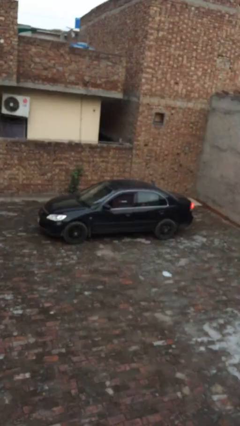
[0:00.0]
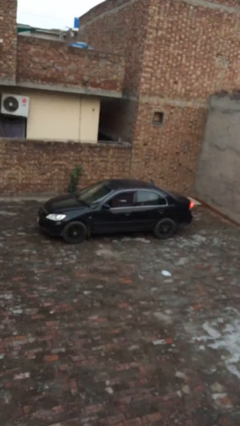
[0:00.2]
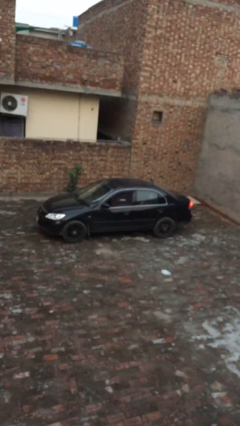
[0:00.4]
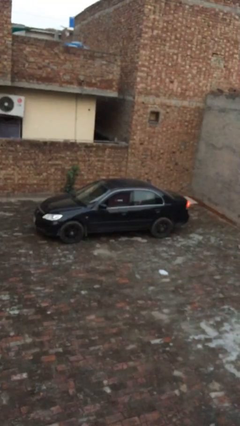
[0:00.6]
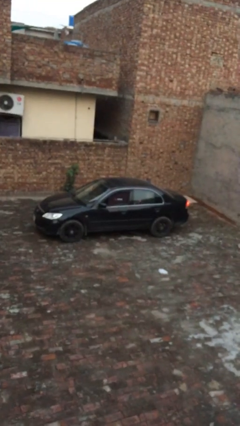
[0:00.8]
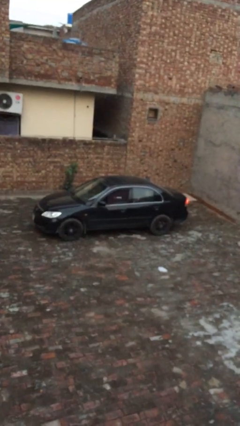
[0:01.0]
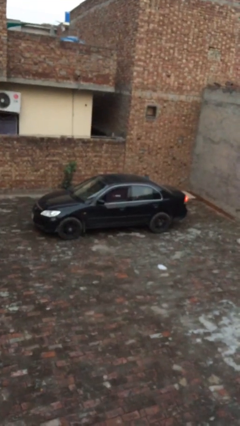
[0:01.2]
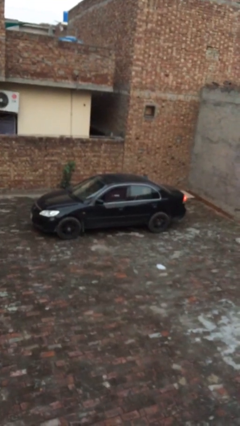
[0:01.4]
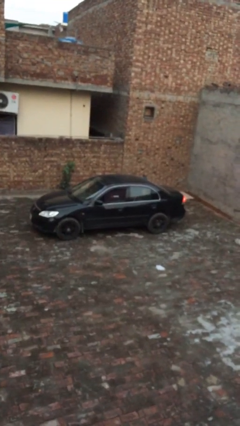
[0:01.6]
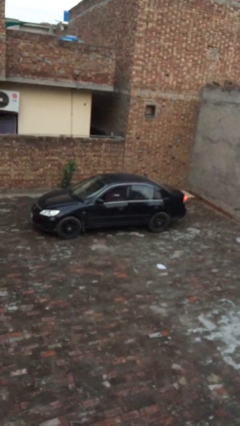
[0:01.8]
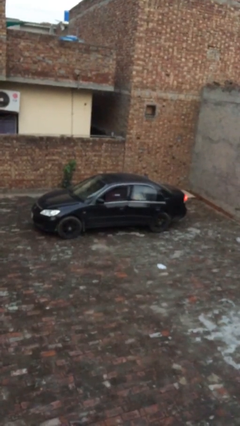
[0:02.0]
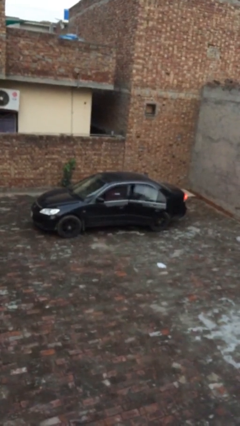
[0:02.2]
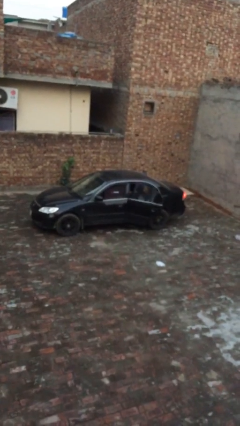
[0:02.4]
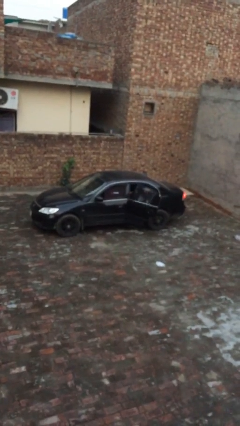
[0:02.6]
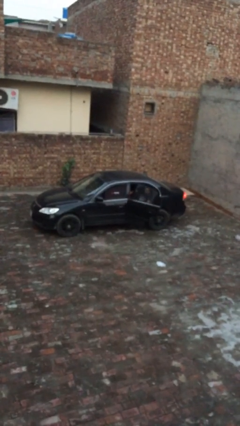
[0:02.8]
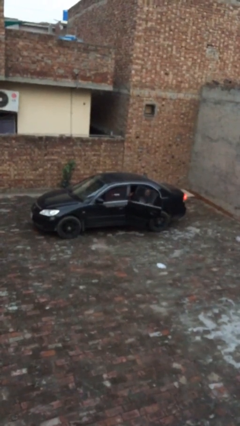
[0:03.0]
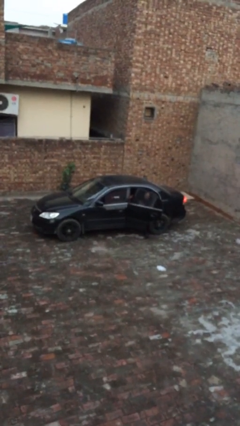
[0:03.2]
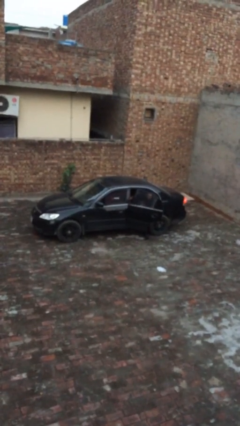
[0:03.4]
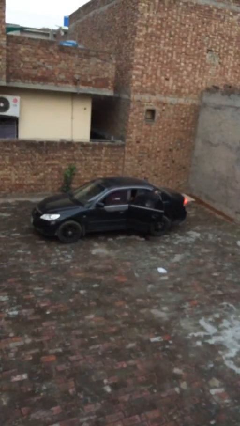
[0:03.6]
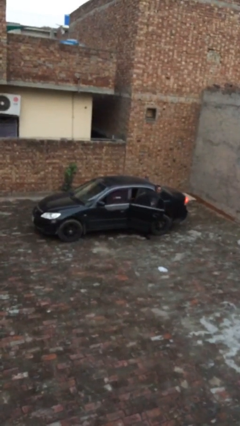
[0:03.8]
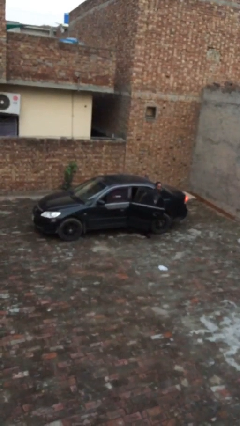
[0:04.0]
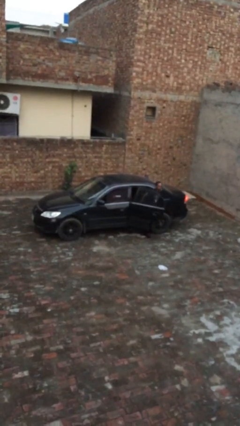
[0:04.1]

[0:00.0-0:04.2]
car drops off person

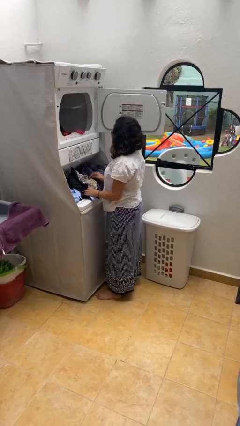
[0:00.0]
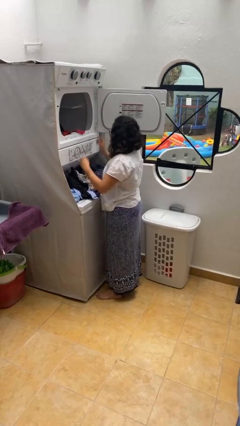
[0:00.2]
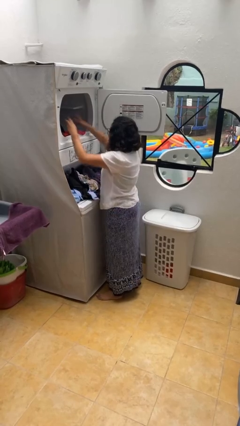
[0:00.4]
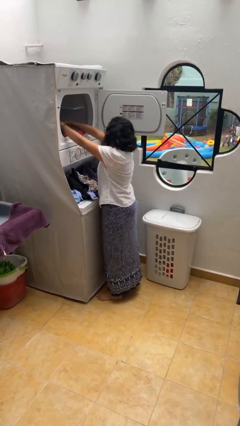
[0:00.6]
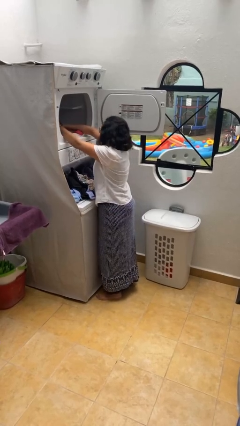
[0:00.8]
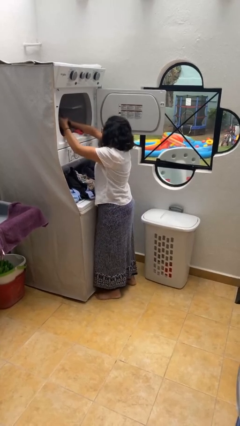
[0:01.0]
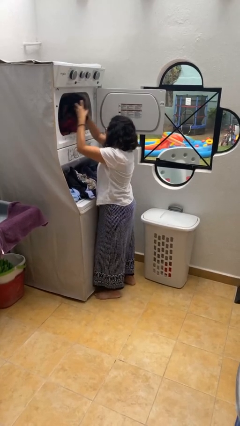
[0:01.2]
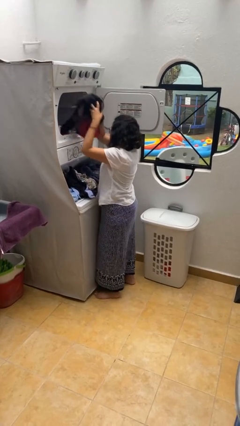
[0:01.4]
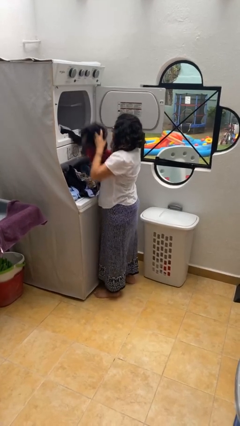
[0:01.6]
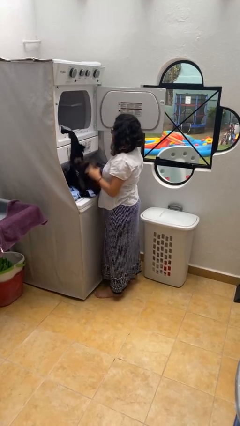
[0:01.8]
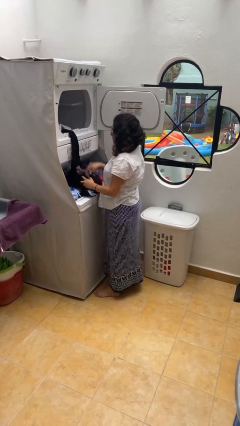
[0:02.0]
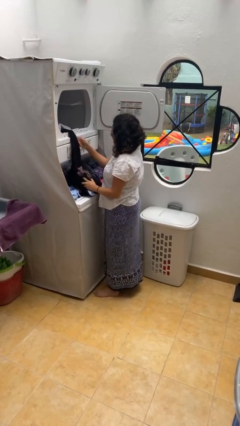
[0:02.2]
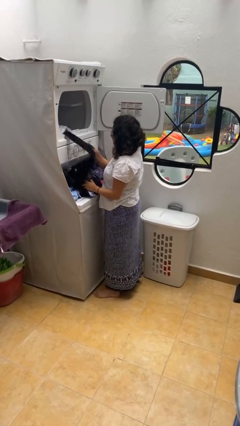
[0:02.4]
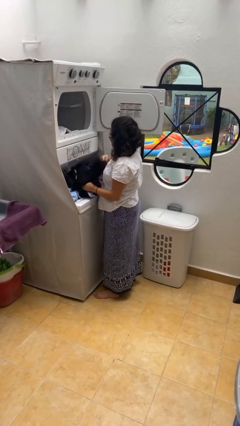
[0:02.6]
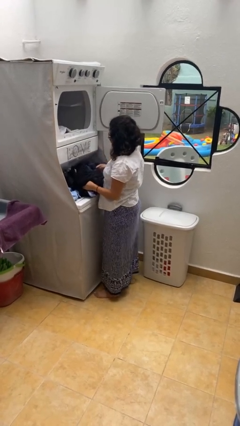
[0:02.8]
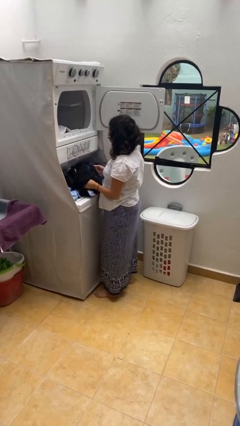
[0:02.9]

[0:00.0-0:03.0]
person unloads dryer

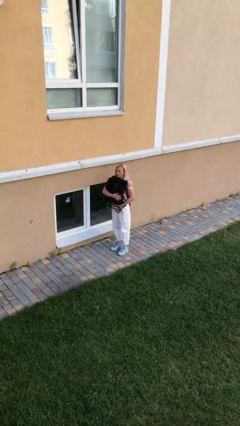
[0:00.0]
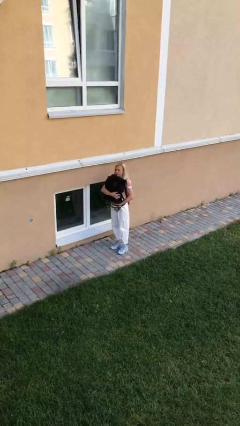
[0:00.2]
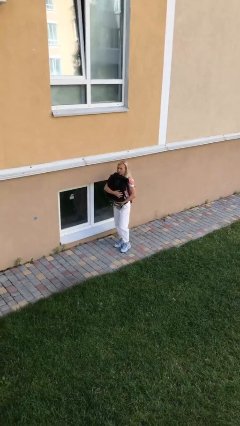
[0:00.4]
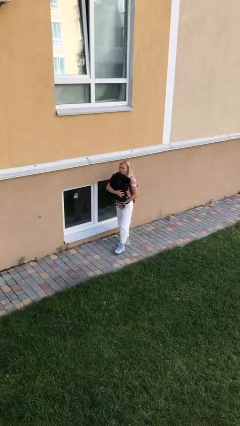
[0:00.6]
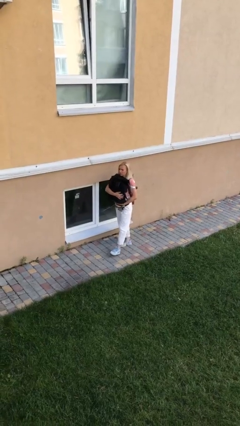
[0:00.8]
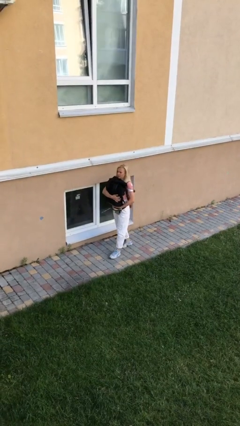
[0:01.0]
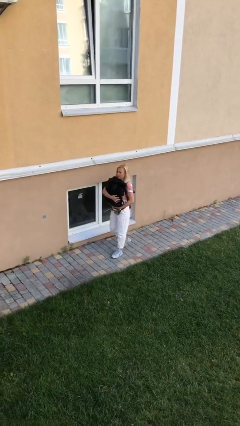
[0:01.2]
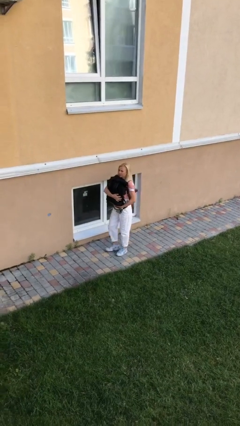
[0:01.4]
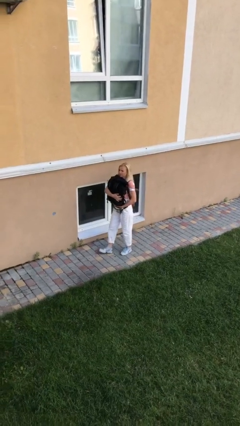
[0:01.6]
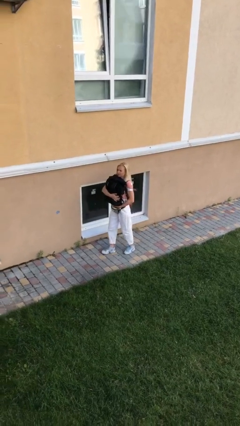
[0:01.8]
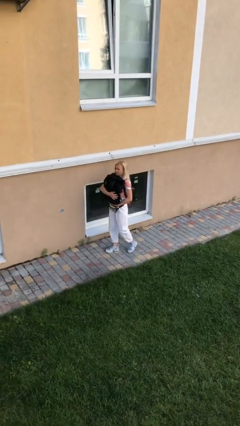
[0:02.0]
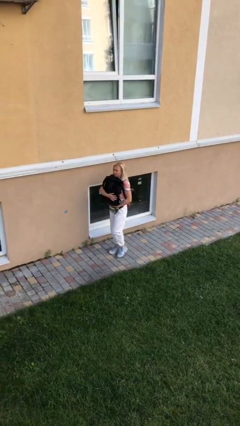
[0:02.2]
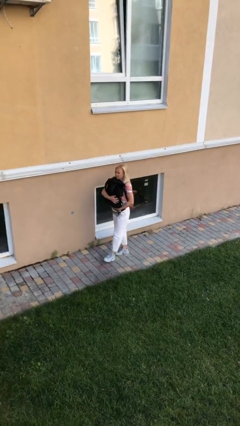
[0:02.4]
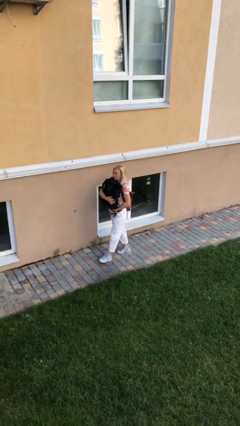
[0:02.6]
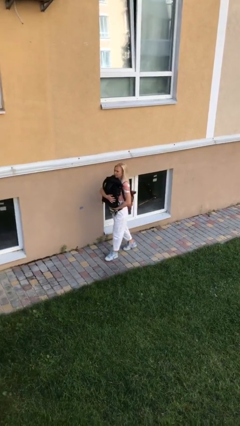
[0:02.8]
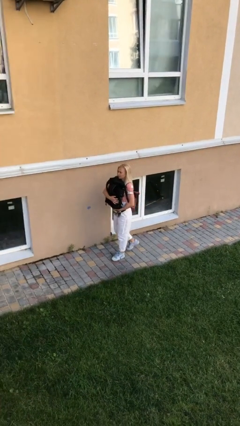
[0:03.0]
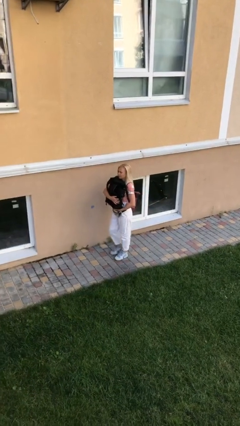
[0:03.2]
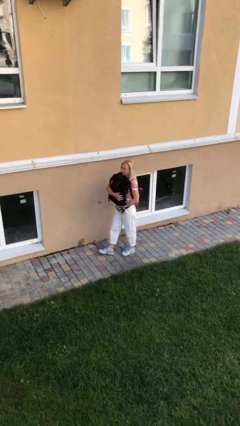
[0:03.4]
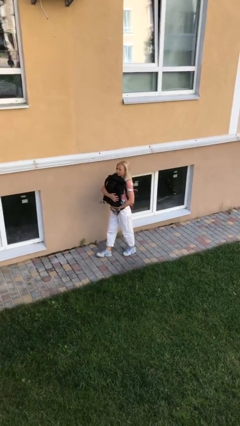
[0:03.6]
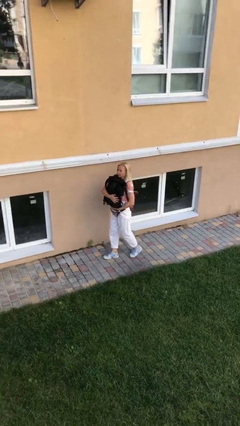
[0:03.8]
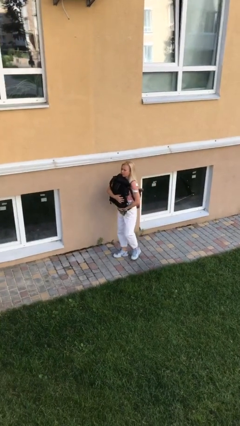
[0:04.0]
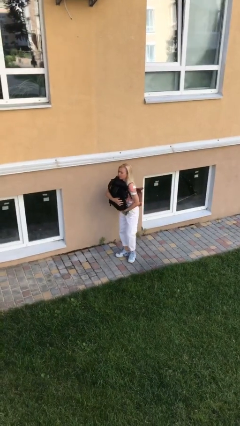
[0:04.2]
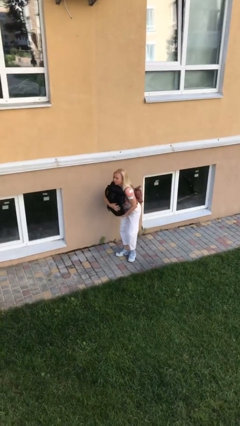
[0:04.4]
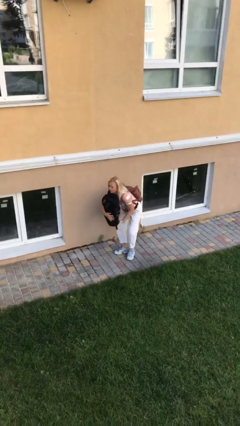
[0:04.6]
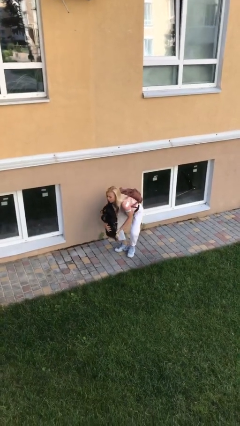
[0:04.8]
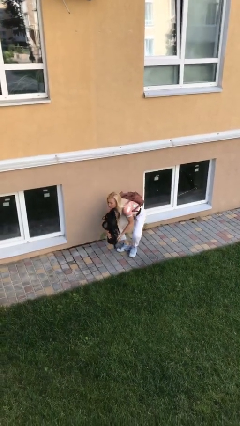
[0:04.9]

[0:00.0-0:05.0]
person carries heavy object

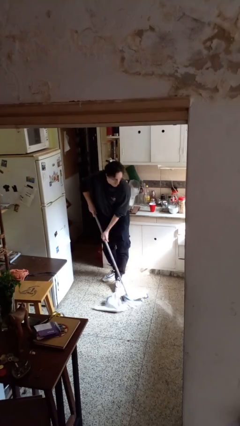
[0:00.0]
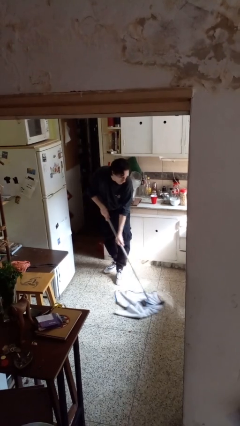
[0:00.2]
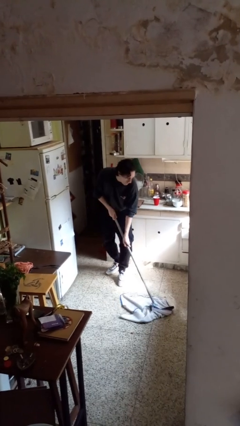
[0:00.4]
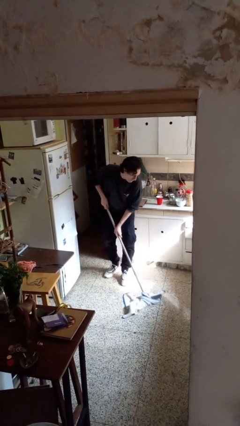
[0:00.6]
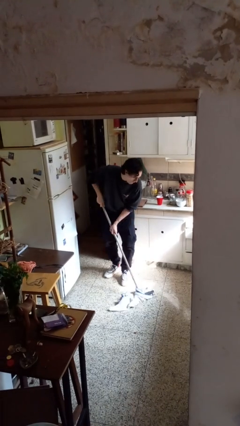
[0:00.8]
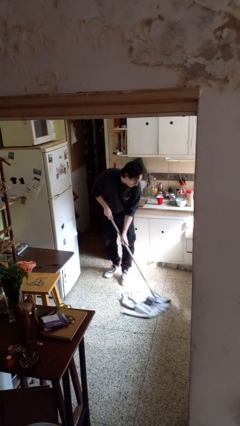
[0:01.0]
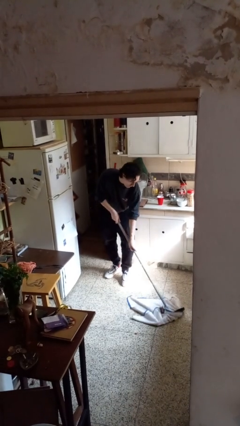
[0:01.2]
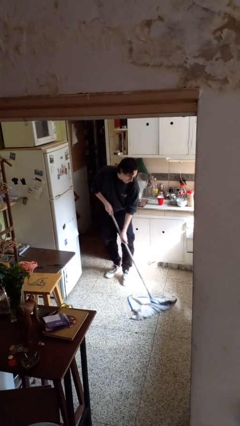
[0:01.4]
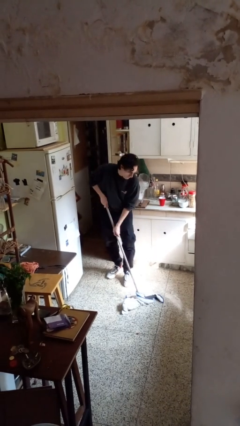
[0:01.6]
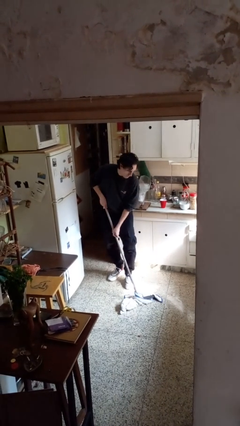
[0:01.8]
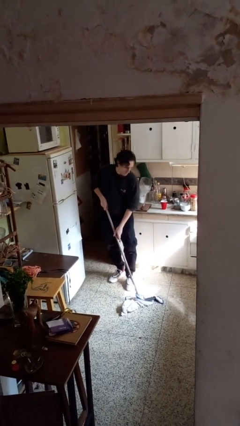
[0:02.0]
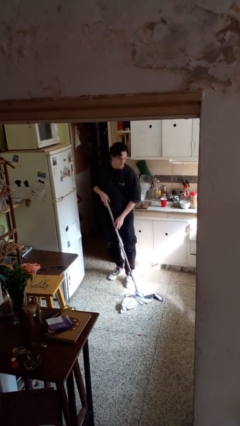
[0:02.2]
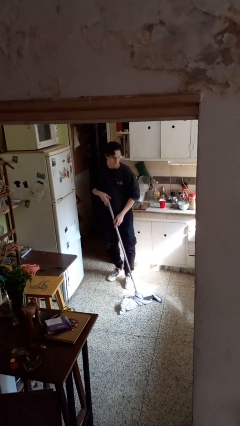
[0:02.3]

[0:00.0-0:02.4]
person mops

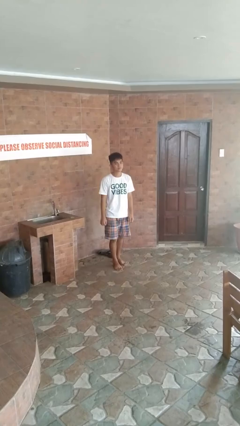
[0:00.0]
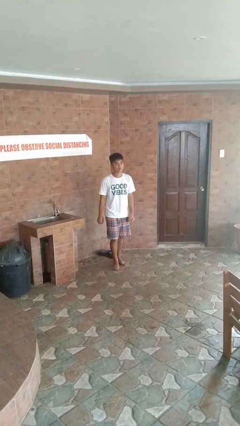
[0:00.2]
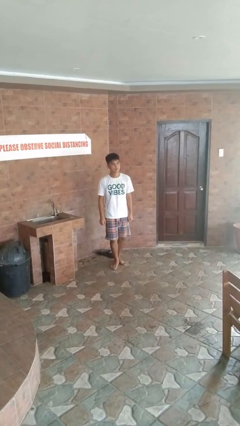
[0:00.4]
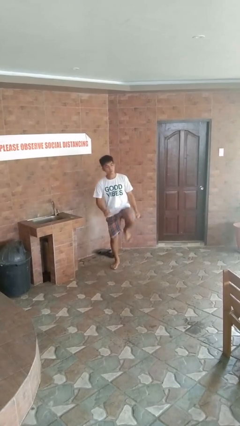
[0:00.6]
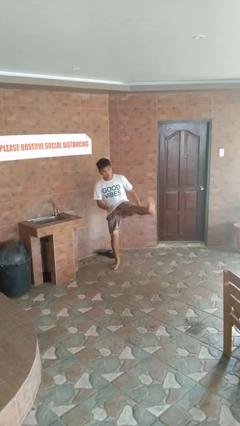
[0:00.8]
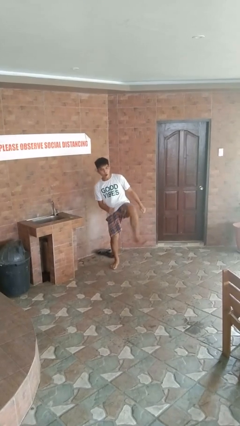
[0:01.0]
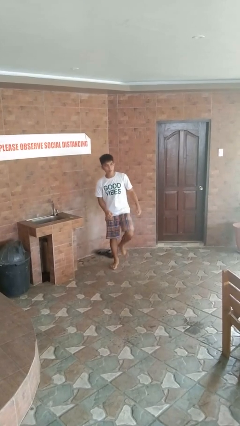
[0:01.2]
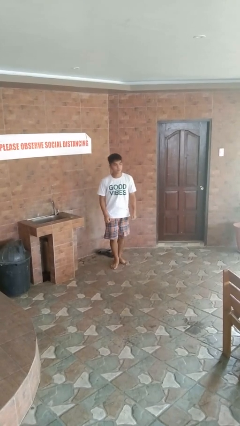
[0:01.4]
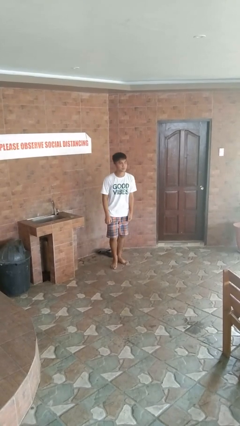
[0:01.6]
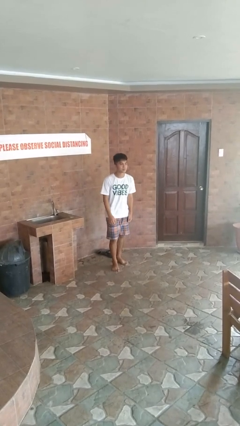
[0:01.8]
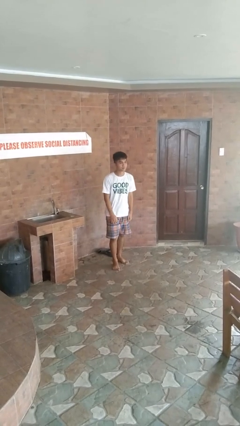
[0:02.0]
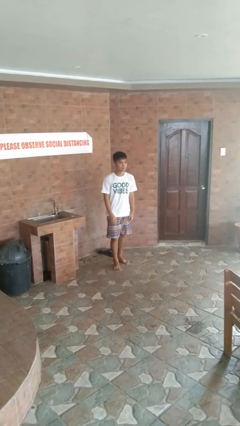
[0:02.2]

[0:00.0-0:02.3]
person karate kicks

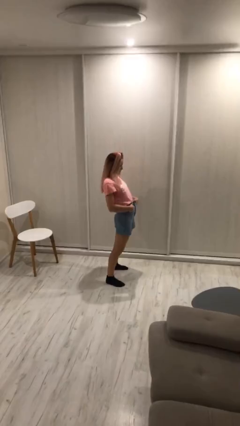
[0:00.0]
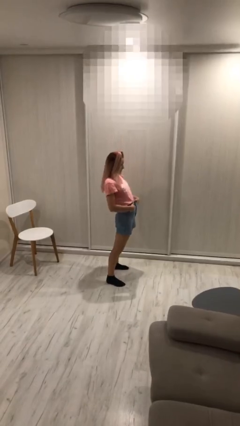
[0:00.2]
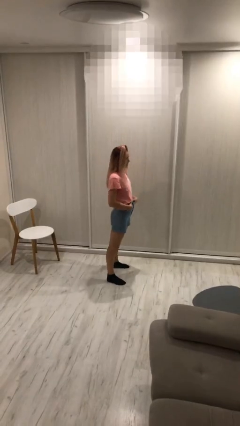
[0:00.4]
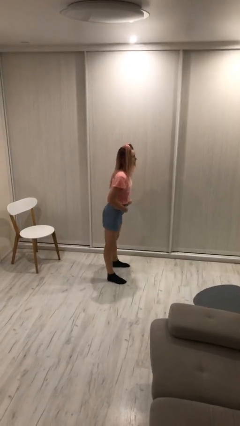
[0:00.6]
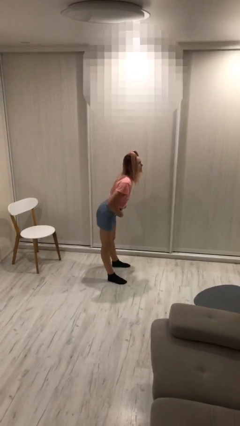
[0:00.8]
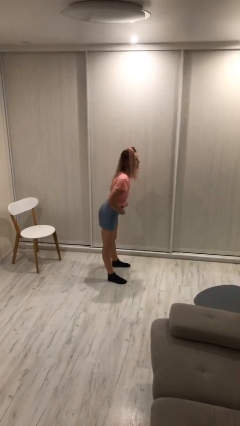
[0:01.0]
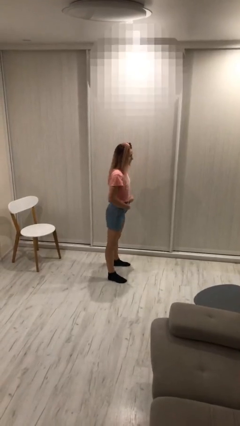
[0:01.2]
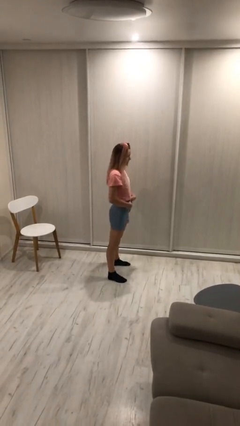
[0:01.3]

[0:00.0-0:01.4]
person wiggles hips
